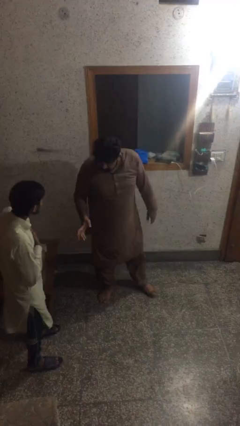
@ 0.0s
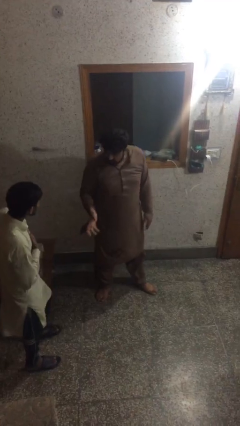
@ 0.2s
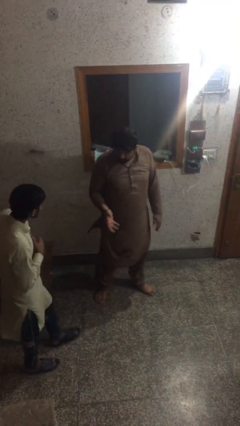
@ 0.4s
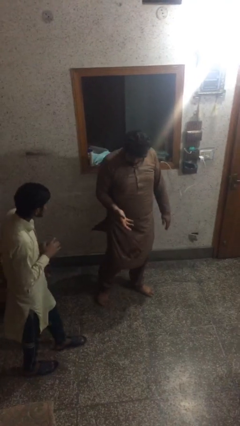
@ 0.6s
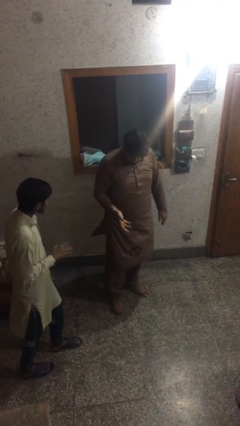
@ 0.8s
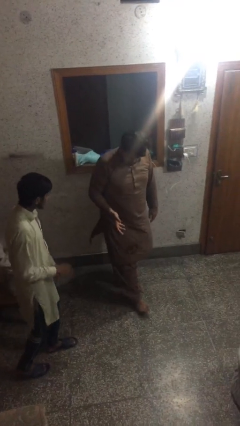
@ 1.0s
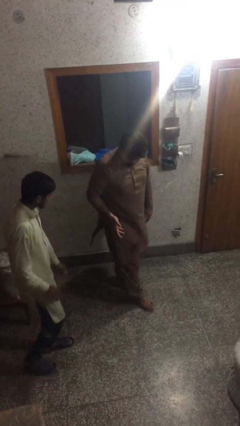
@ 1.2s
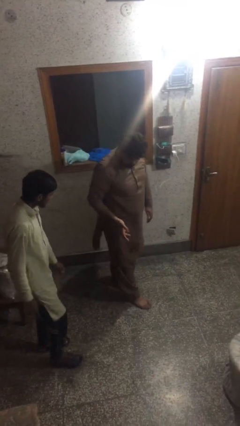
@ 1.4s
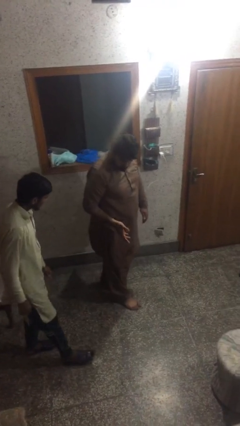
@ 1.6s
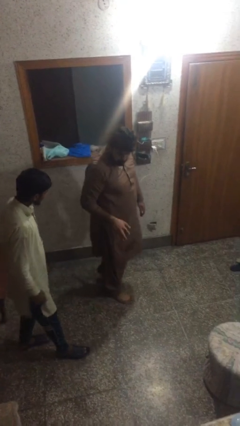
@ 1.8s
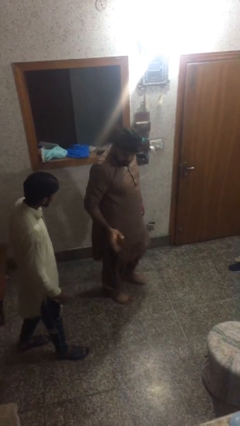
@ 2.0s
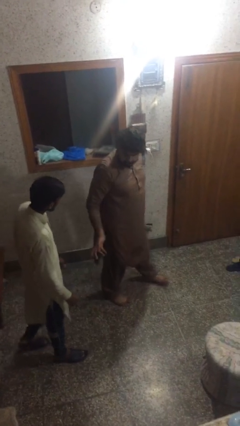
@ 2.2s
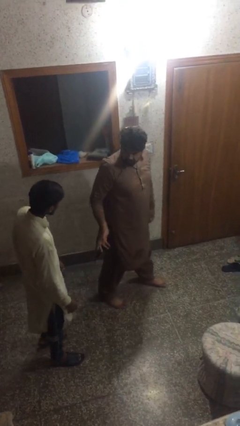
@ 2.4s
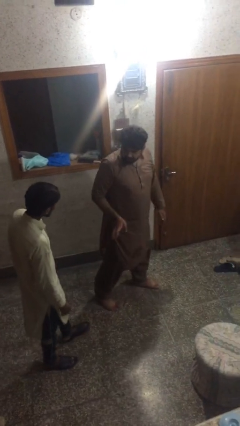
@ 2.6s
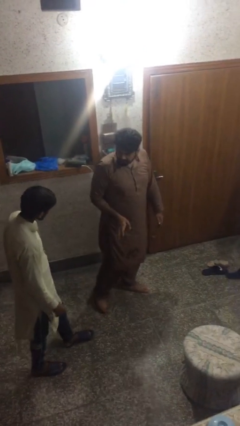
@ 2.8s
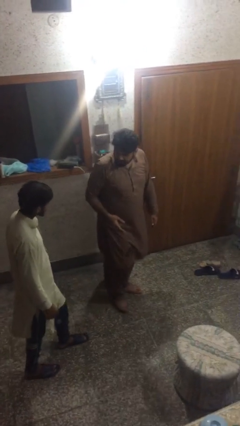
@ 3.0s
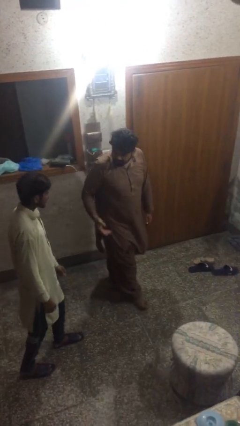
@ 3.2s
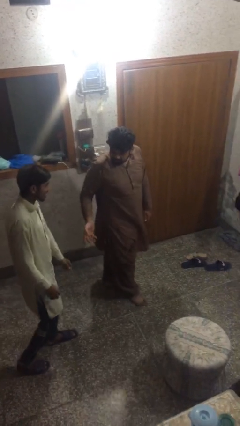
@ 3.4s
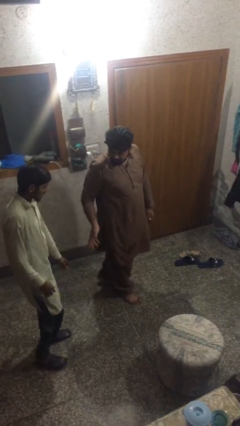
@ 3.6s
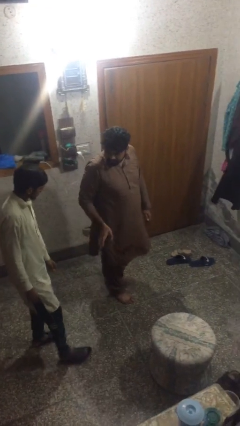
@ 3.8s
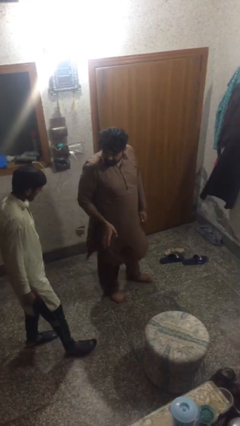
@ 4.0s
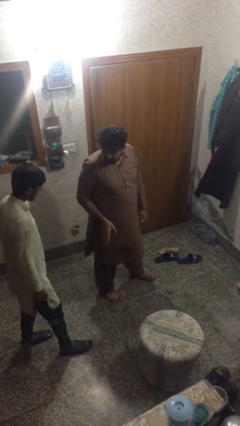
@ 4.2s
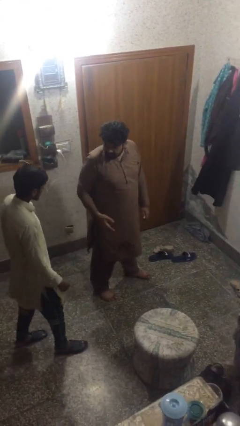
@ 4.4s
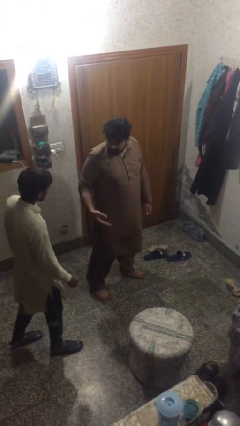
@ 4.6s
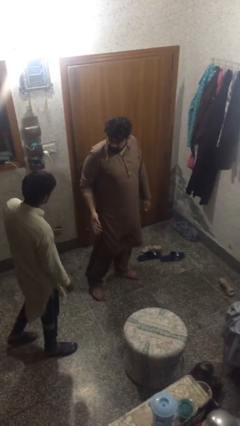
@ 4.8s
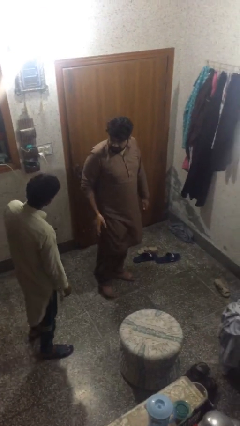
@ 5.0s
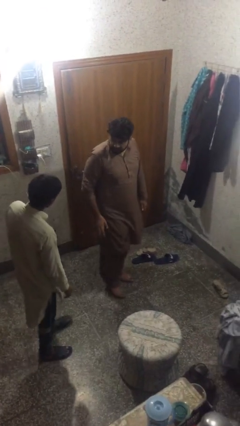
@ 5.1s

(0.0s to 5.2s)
person talks to person

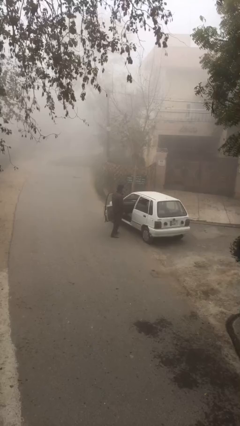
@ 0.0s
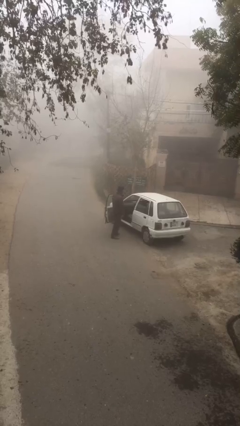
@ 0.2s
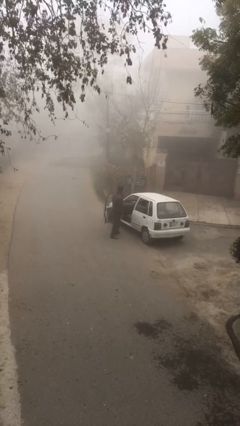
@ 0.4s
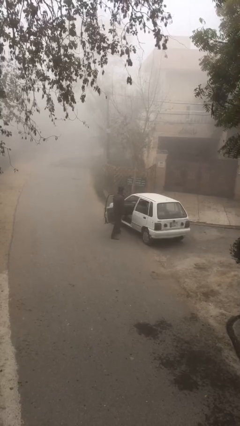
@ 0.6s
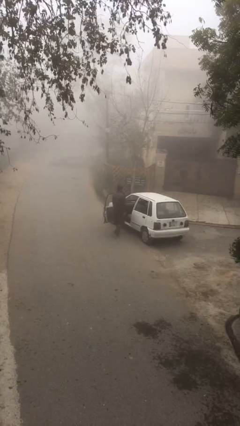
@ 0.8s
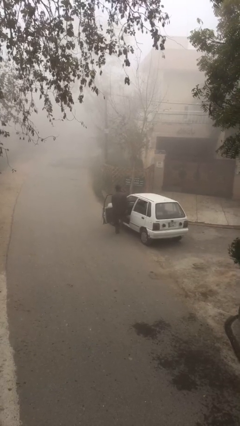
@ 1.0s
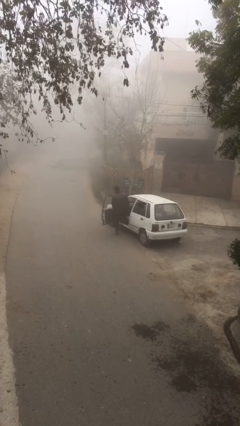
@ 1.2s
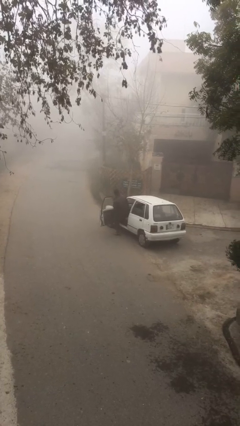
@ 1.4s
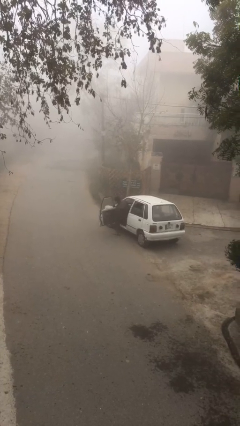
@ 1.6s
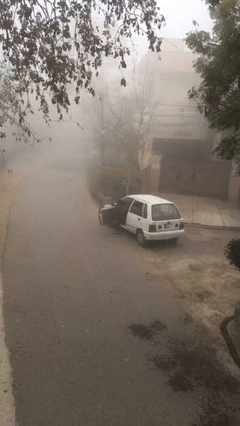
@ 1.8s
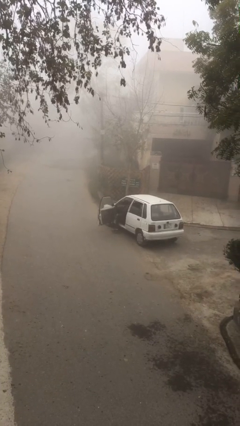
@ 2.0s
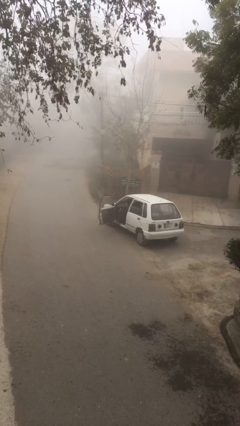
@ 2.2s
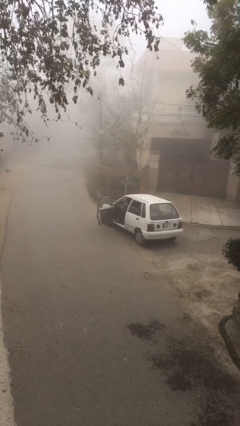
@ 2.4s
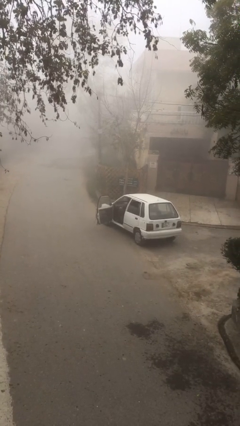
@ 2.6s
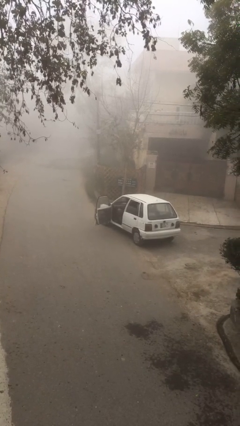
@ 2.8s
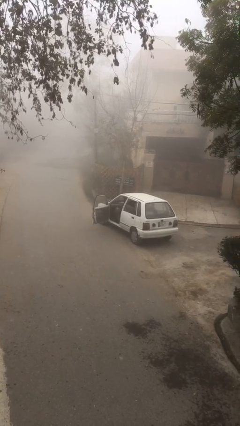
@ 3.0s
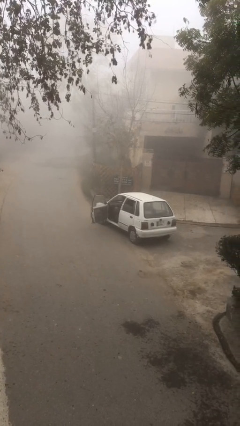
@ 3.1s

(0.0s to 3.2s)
person enters car

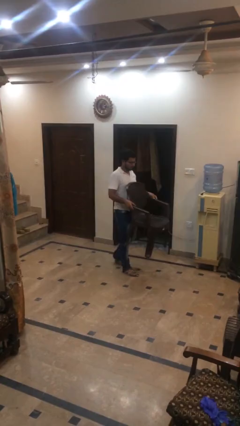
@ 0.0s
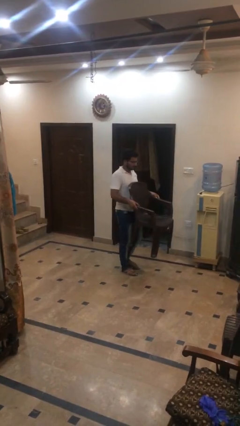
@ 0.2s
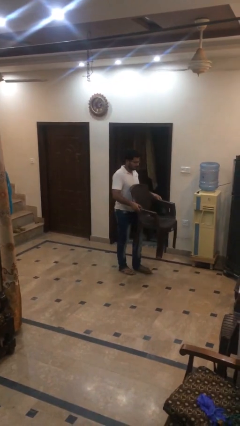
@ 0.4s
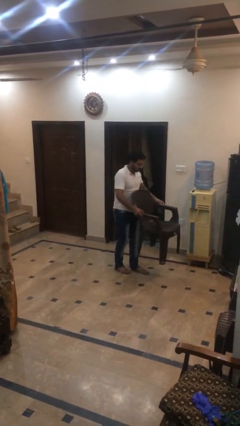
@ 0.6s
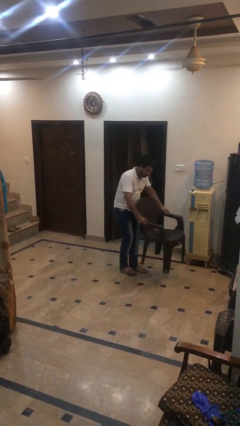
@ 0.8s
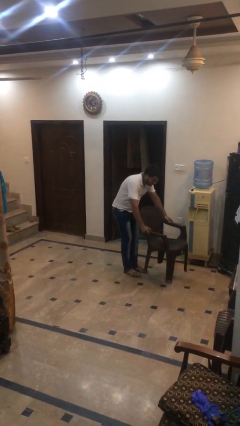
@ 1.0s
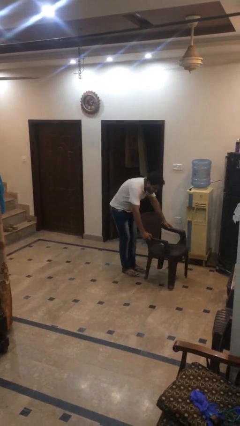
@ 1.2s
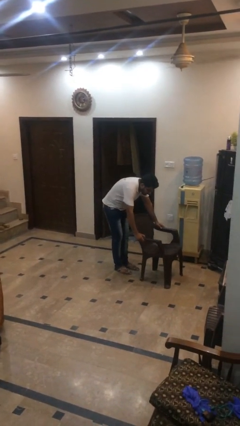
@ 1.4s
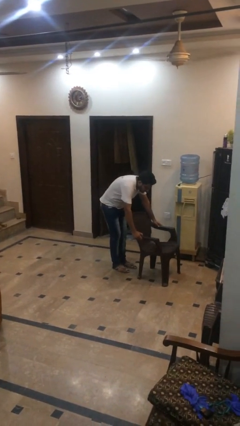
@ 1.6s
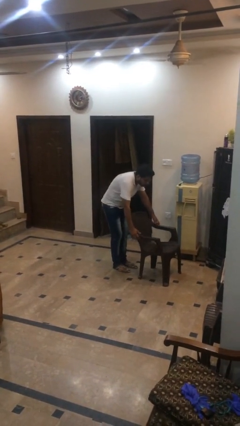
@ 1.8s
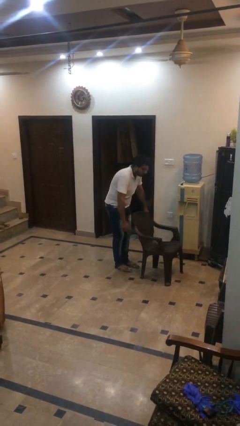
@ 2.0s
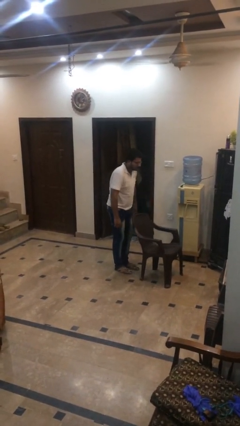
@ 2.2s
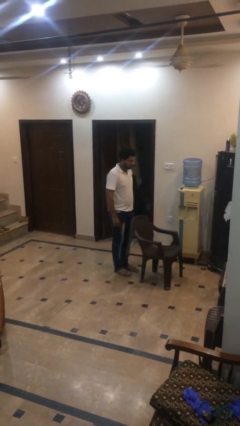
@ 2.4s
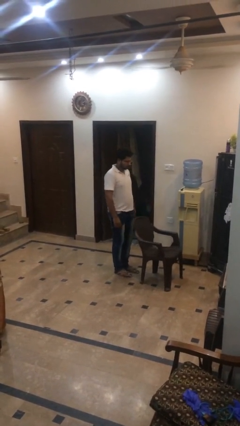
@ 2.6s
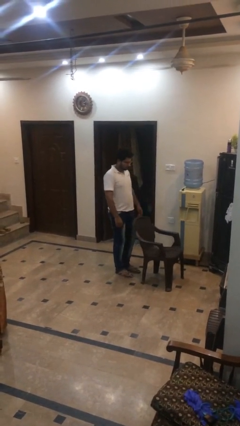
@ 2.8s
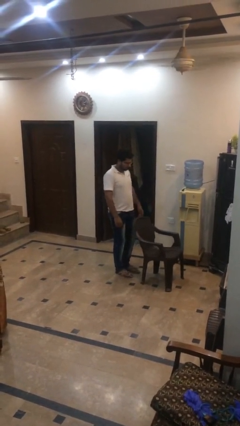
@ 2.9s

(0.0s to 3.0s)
person puts down object on floor

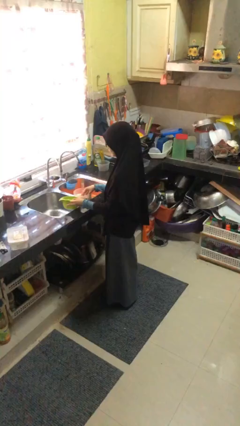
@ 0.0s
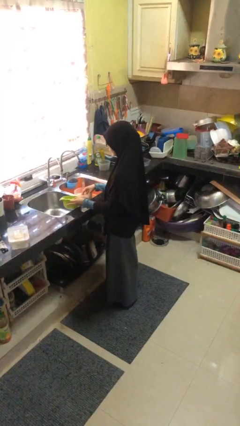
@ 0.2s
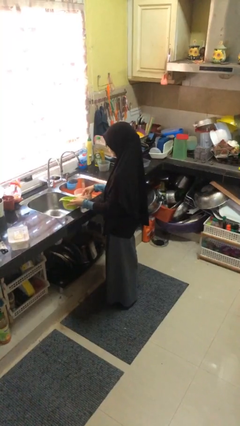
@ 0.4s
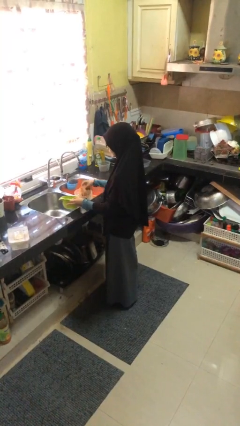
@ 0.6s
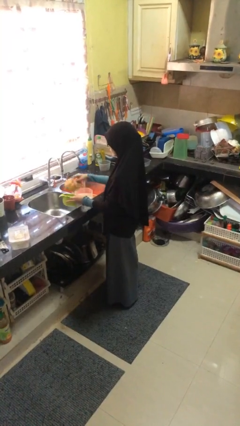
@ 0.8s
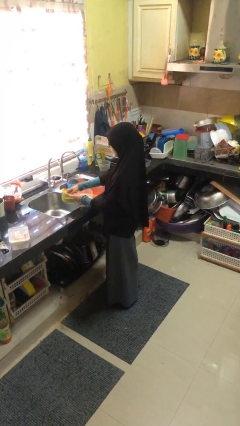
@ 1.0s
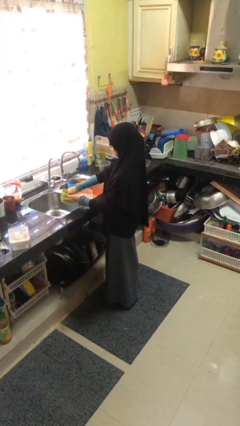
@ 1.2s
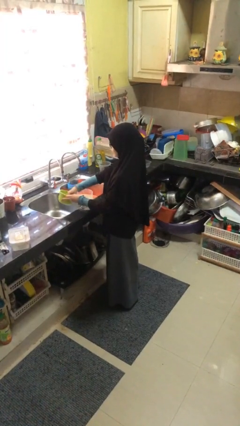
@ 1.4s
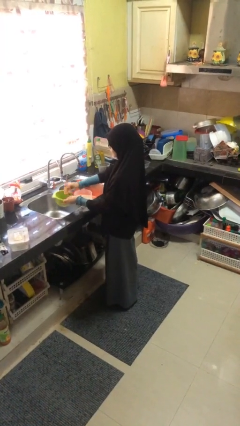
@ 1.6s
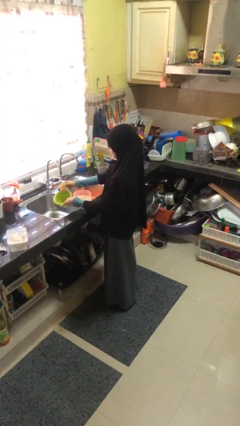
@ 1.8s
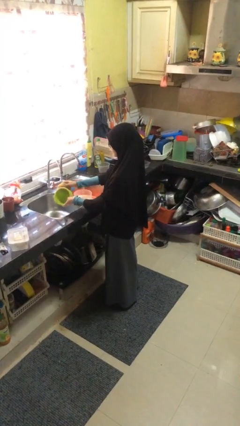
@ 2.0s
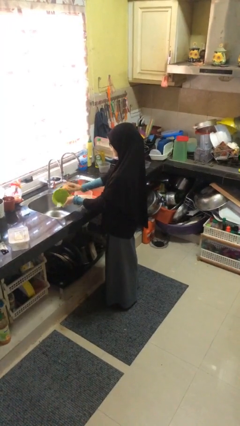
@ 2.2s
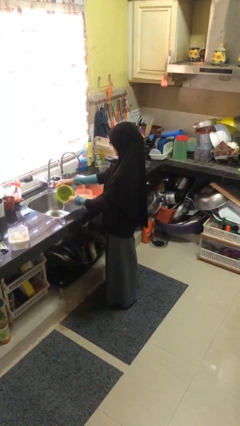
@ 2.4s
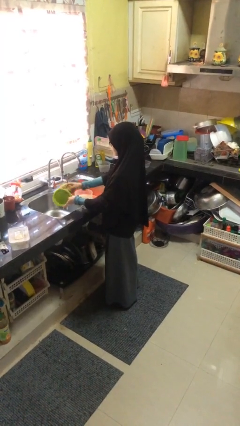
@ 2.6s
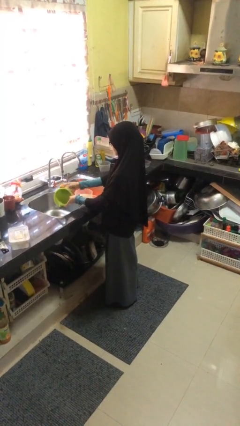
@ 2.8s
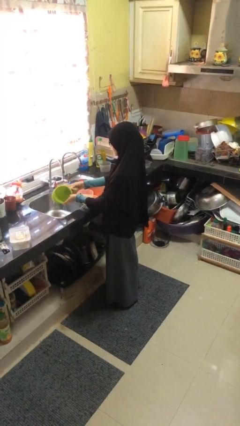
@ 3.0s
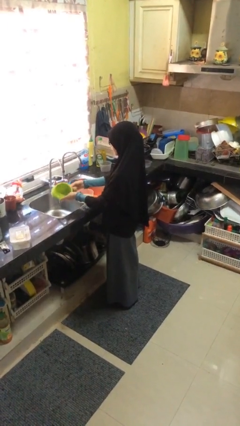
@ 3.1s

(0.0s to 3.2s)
person washes dish

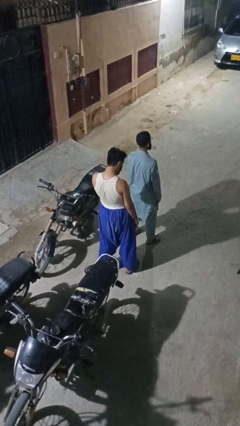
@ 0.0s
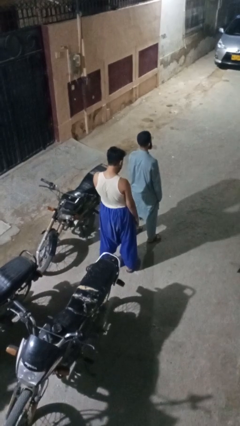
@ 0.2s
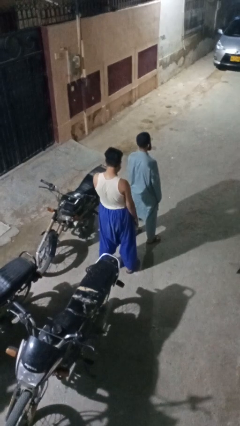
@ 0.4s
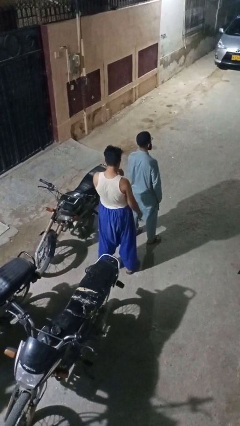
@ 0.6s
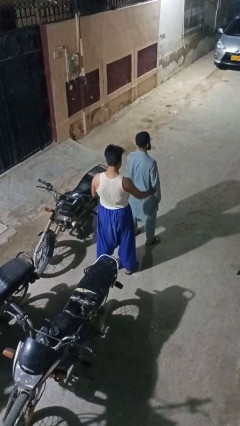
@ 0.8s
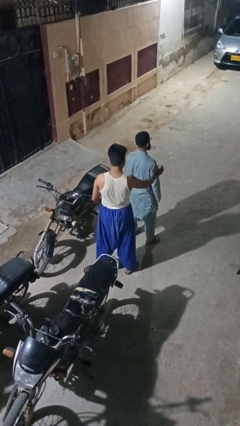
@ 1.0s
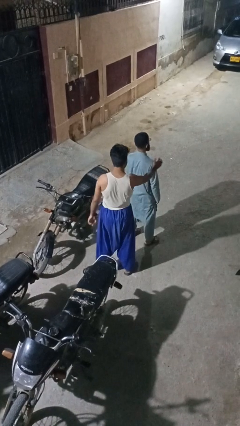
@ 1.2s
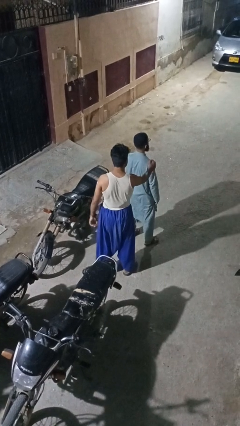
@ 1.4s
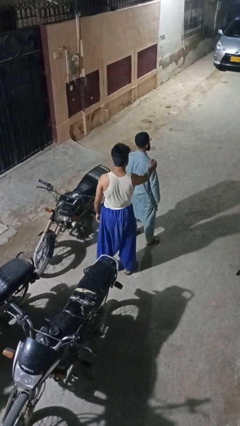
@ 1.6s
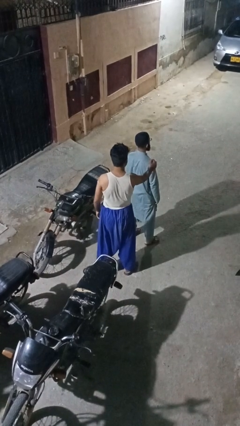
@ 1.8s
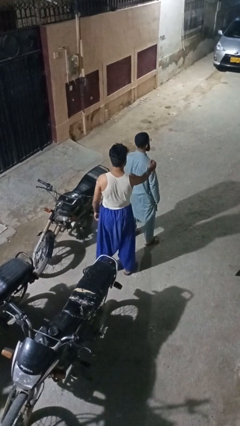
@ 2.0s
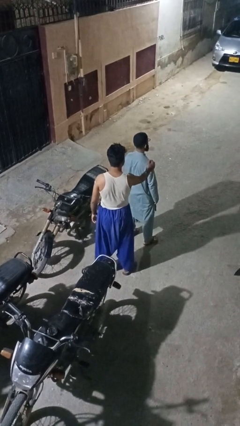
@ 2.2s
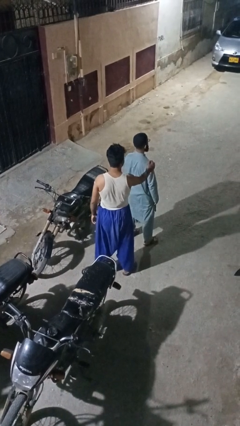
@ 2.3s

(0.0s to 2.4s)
person grabs person by shoulder

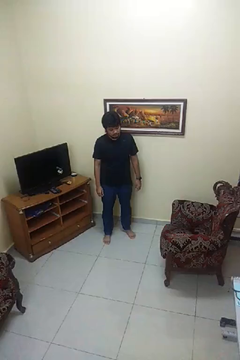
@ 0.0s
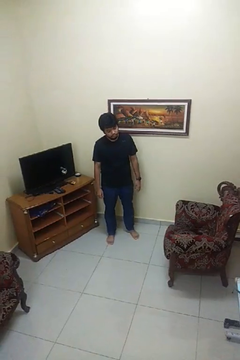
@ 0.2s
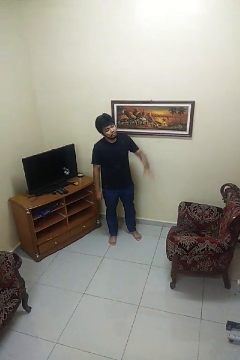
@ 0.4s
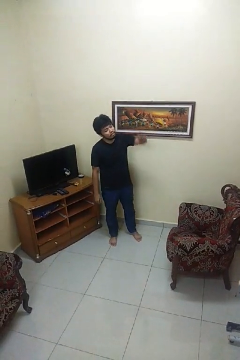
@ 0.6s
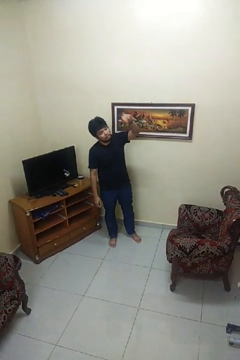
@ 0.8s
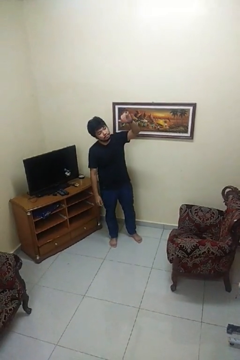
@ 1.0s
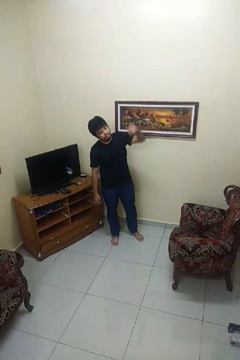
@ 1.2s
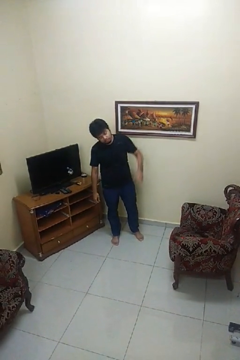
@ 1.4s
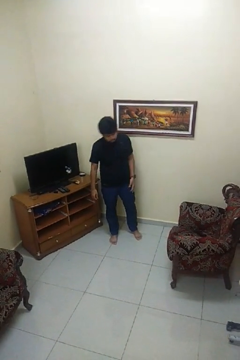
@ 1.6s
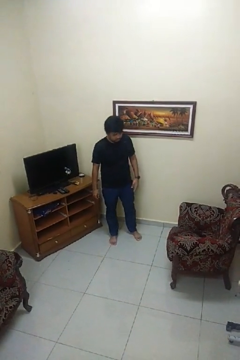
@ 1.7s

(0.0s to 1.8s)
person gestures come here
